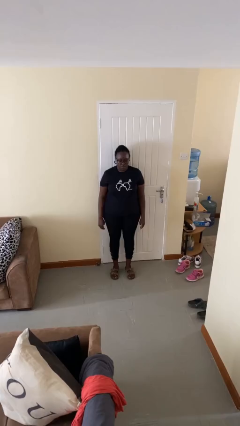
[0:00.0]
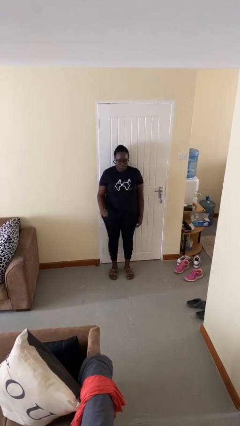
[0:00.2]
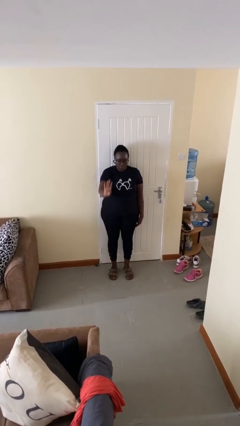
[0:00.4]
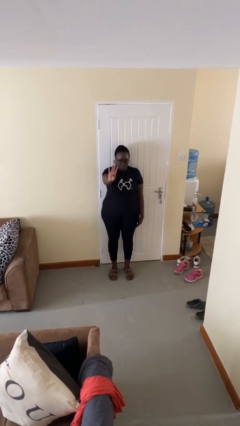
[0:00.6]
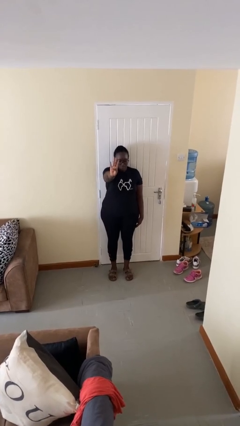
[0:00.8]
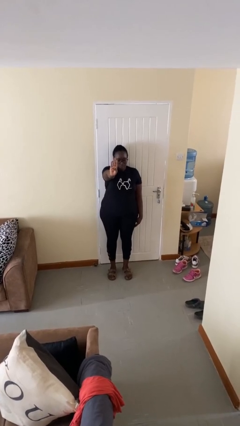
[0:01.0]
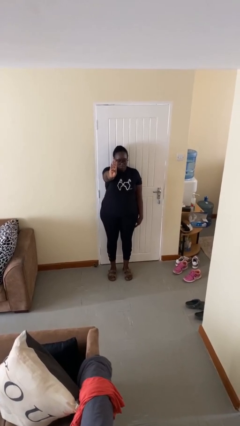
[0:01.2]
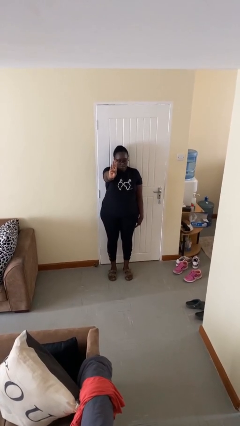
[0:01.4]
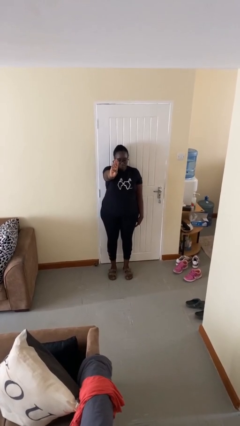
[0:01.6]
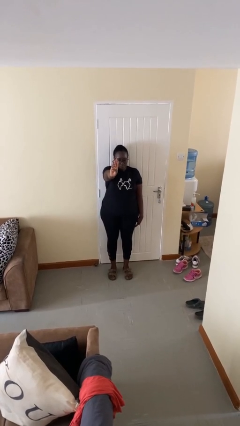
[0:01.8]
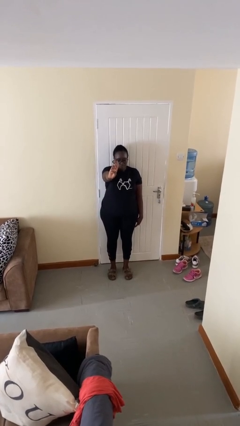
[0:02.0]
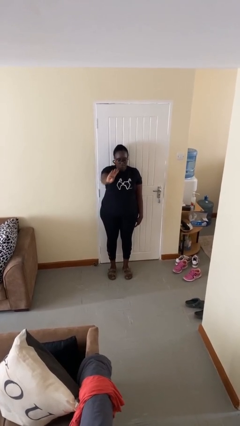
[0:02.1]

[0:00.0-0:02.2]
person gestures number four

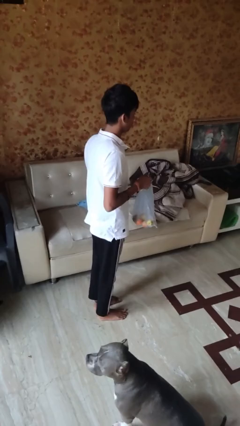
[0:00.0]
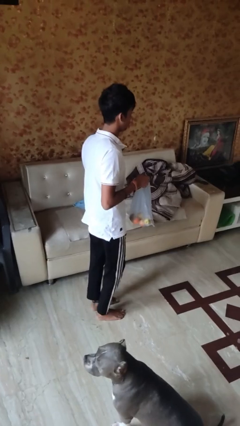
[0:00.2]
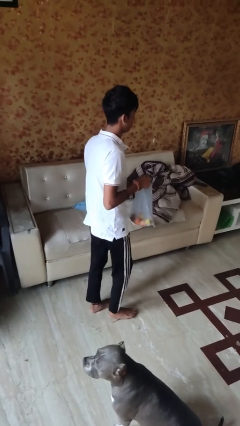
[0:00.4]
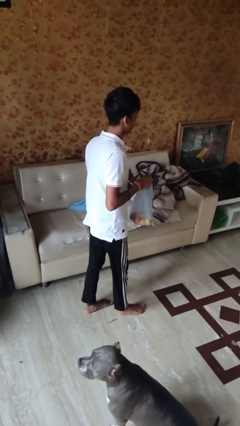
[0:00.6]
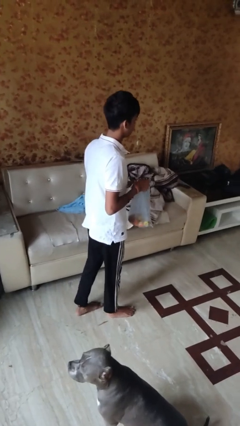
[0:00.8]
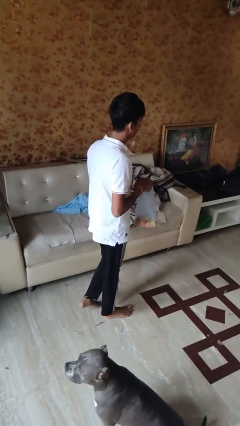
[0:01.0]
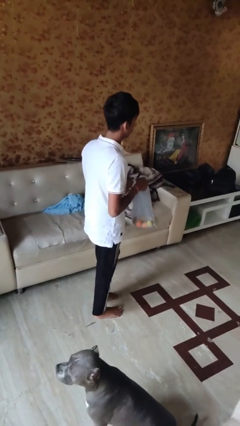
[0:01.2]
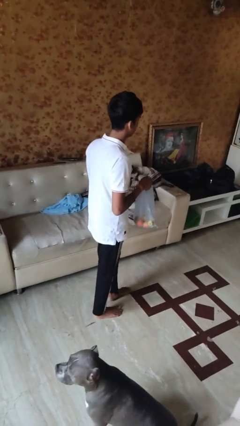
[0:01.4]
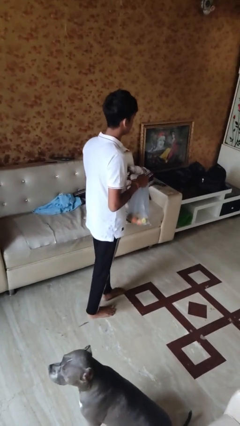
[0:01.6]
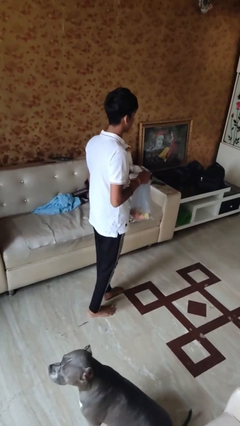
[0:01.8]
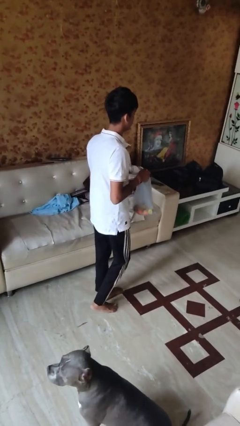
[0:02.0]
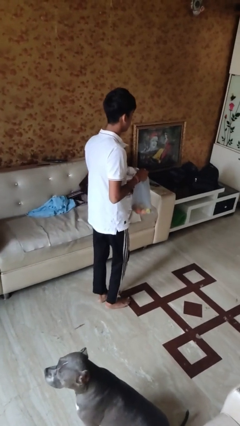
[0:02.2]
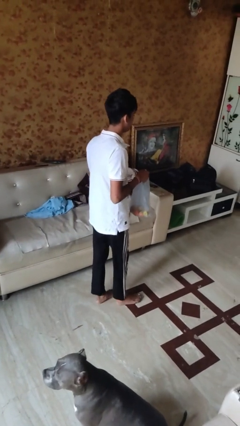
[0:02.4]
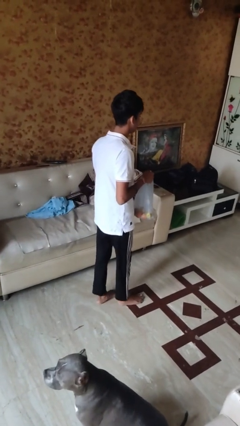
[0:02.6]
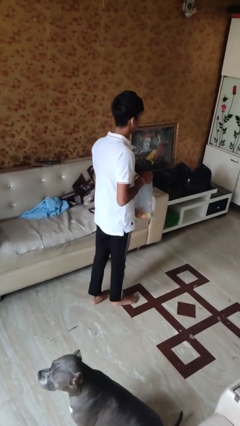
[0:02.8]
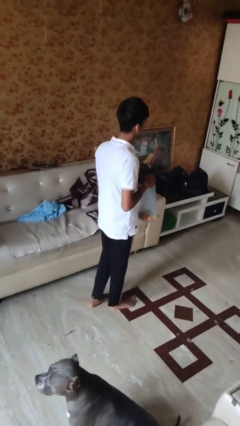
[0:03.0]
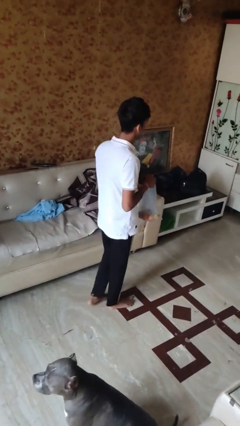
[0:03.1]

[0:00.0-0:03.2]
person carries groceries

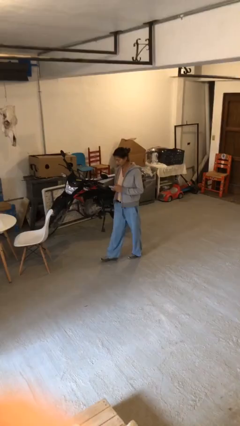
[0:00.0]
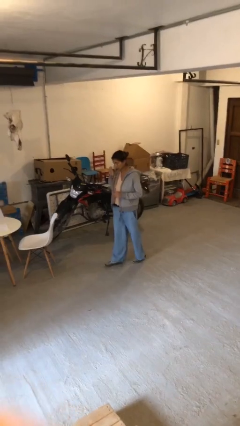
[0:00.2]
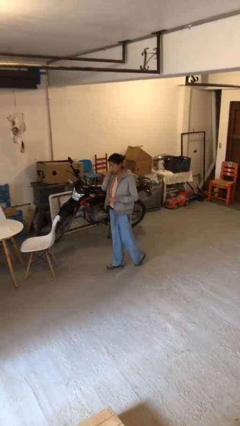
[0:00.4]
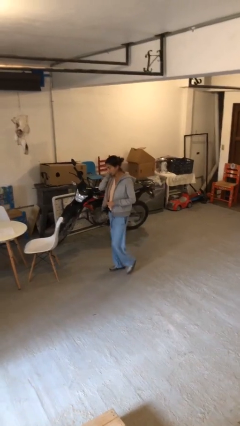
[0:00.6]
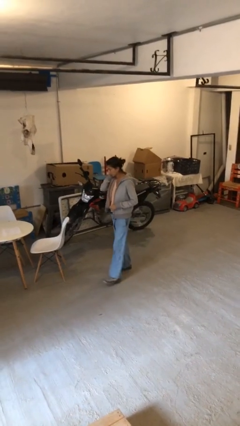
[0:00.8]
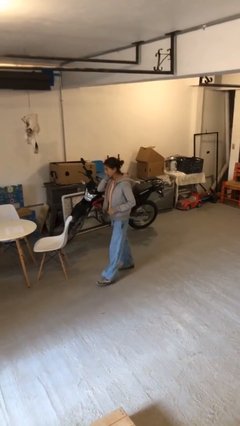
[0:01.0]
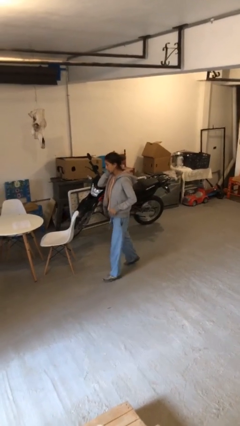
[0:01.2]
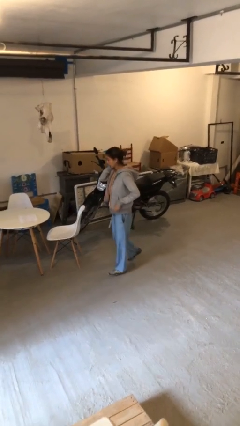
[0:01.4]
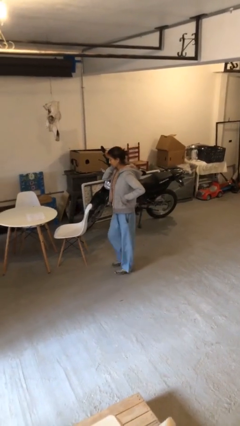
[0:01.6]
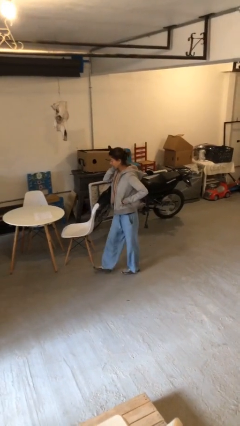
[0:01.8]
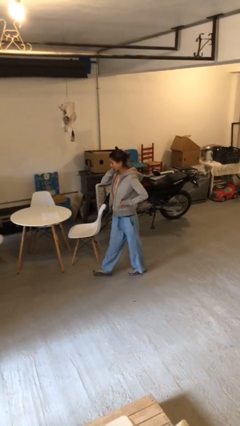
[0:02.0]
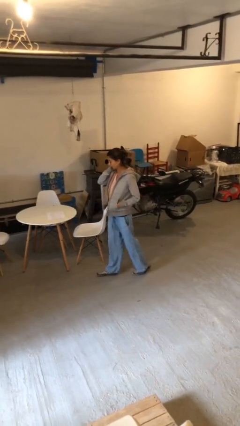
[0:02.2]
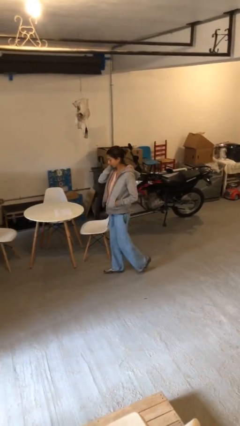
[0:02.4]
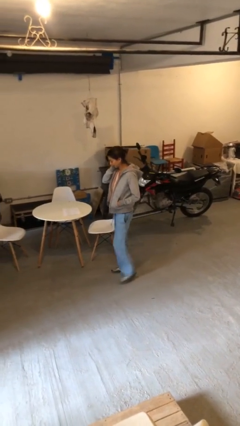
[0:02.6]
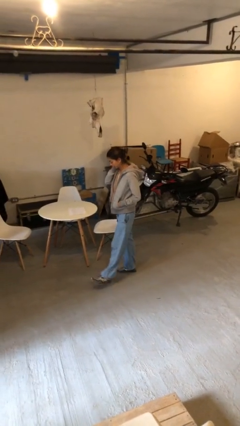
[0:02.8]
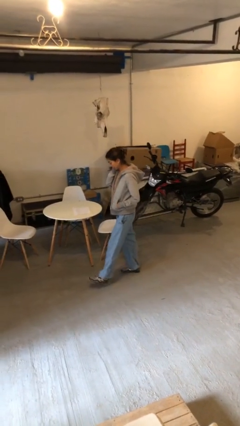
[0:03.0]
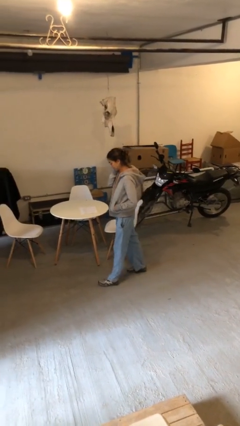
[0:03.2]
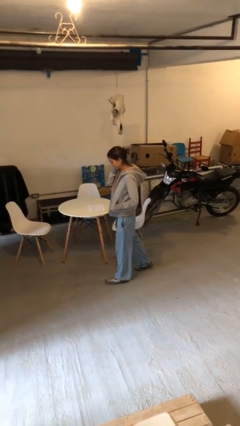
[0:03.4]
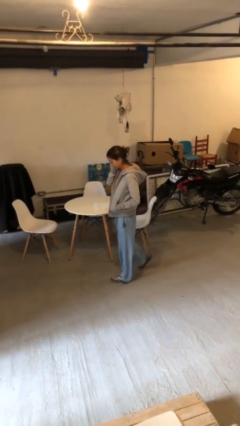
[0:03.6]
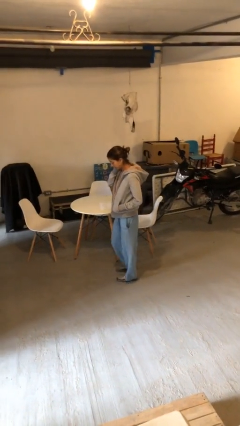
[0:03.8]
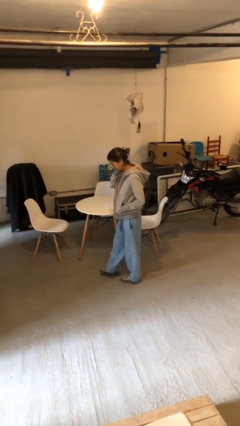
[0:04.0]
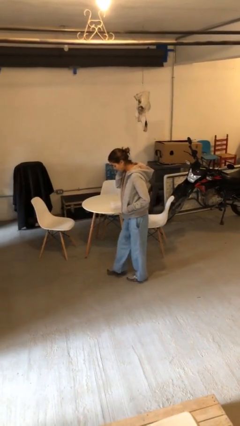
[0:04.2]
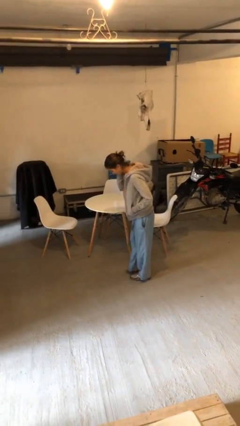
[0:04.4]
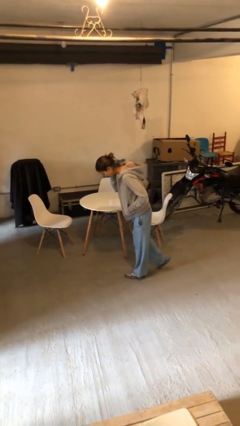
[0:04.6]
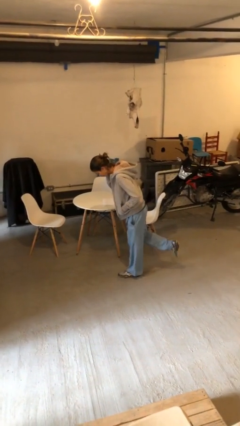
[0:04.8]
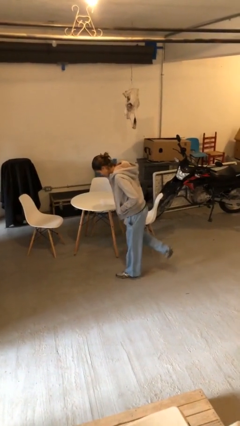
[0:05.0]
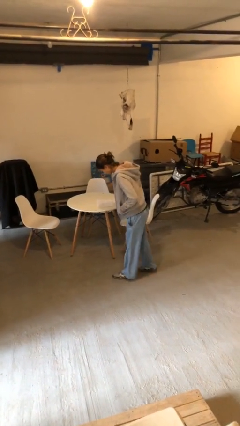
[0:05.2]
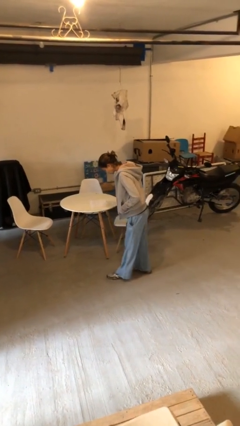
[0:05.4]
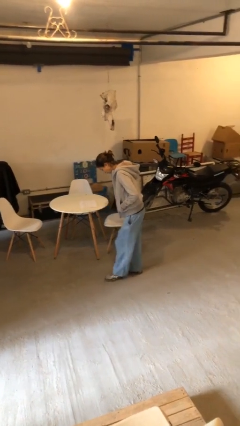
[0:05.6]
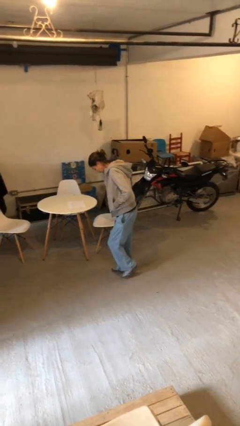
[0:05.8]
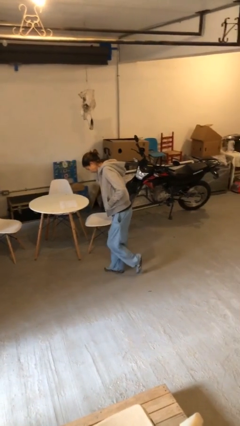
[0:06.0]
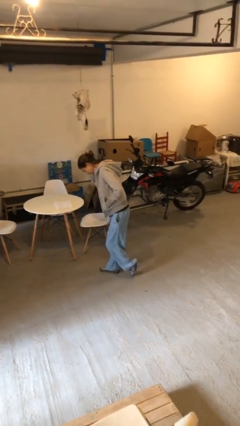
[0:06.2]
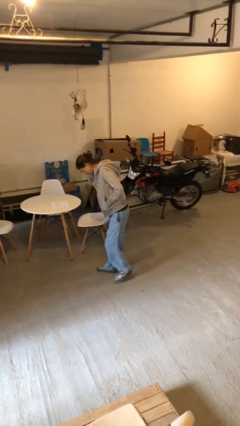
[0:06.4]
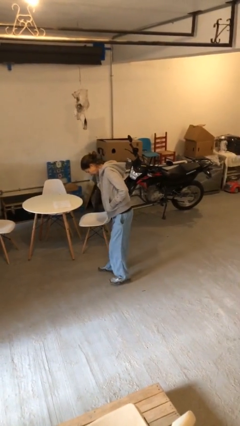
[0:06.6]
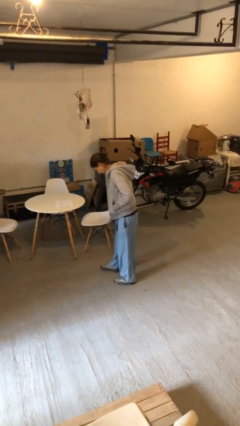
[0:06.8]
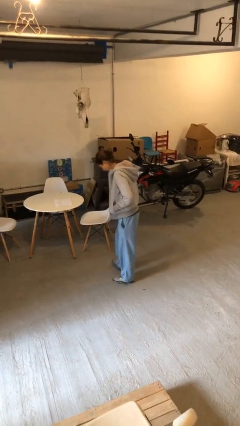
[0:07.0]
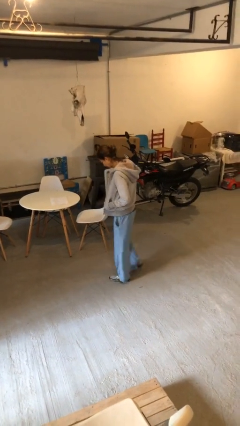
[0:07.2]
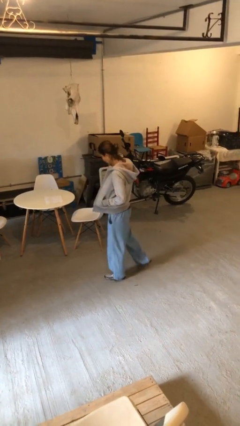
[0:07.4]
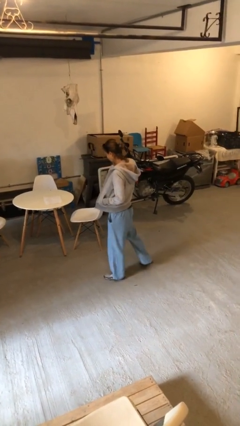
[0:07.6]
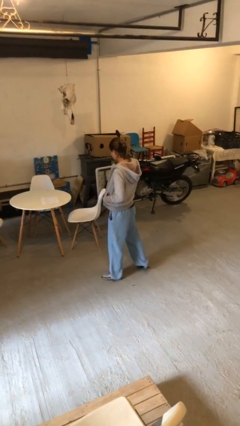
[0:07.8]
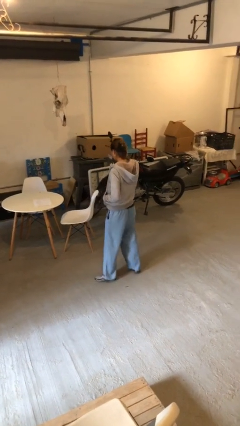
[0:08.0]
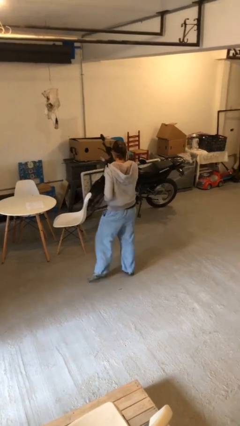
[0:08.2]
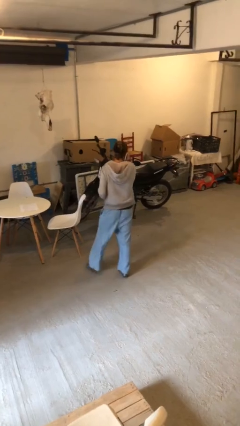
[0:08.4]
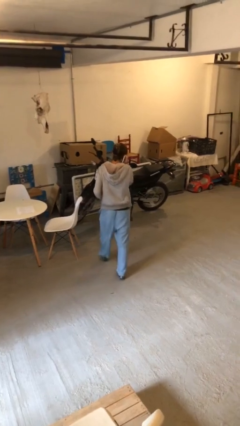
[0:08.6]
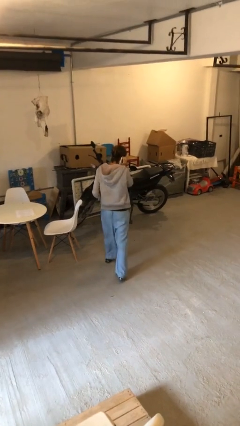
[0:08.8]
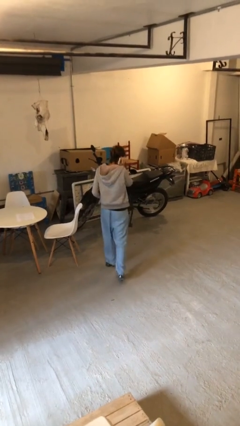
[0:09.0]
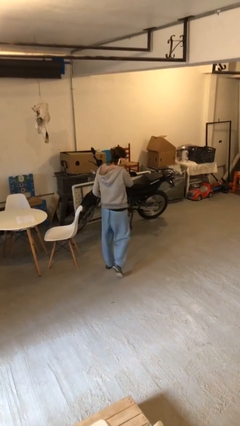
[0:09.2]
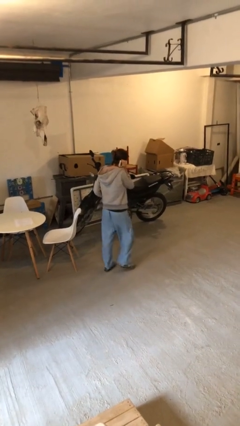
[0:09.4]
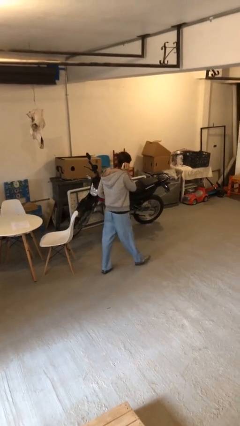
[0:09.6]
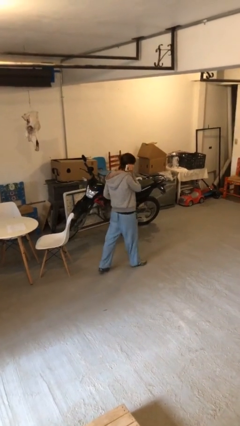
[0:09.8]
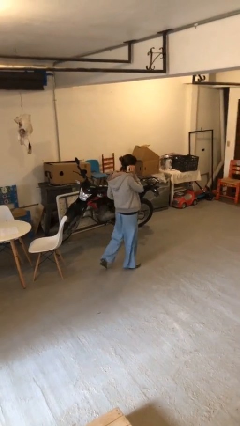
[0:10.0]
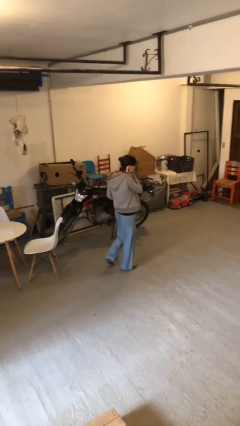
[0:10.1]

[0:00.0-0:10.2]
person talks on phone

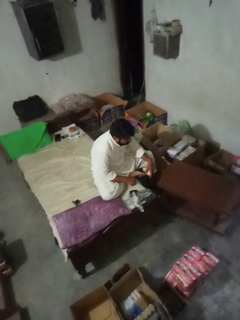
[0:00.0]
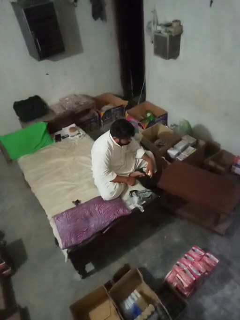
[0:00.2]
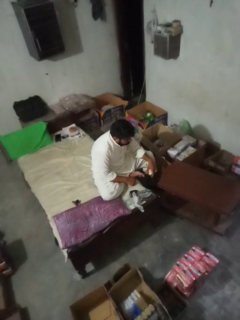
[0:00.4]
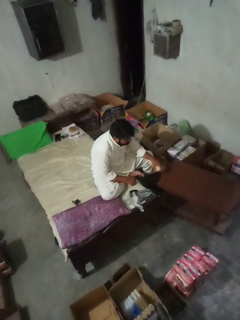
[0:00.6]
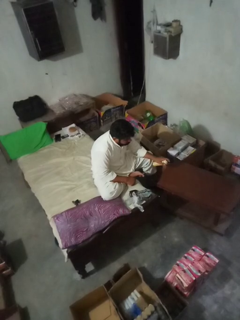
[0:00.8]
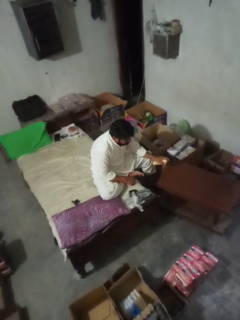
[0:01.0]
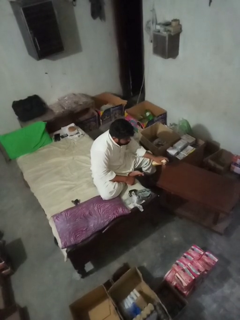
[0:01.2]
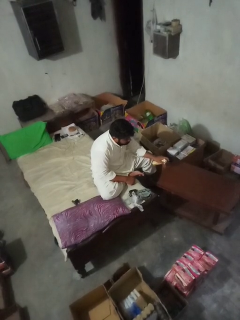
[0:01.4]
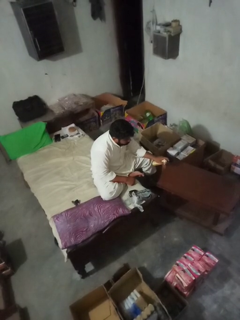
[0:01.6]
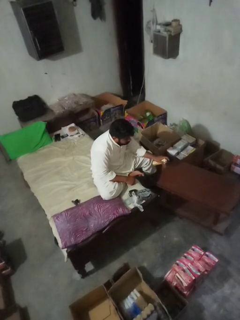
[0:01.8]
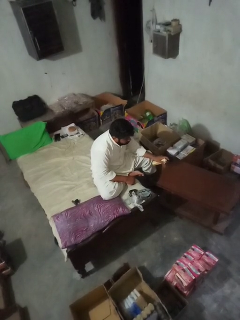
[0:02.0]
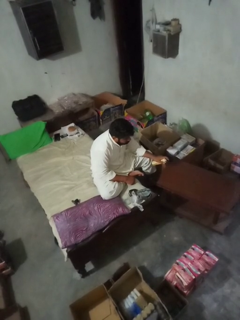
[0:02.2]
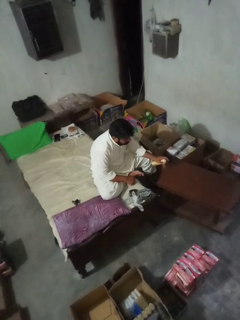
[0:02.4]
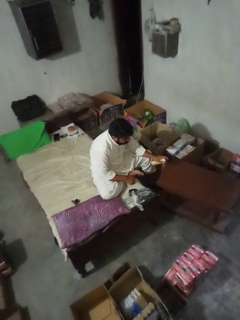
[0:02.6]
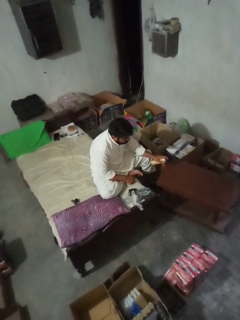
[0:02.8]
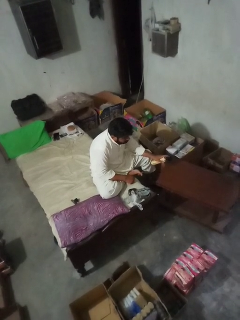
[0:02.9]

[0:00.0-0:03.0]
person sprays from bottle
